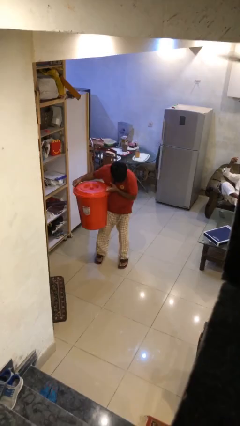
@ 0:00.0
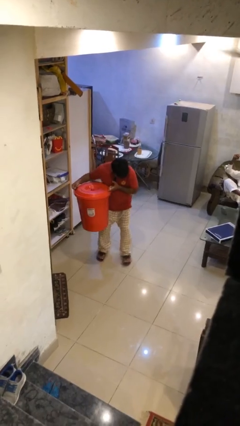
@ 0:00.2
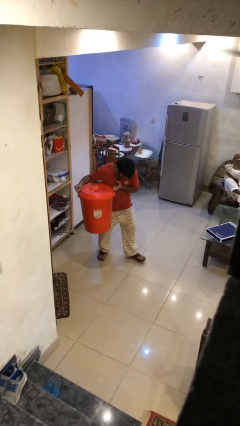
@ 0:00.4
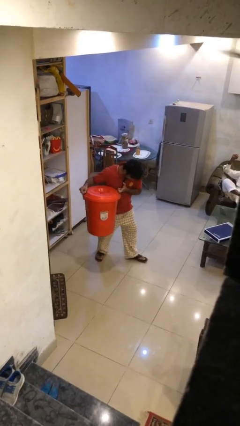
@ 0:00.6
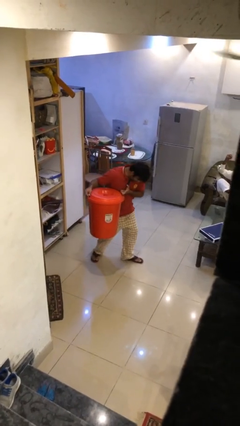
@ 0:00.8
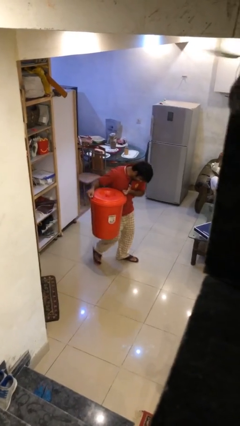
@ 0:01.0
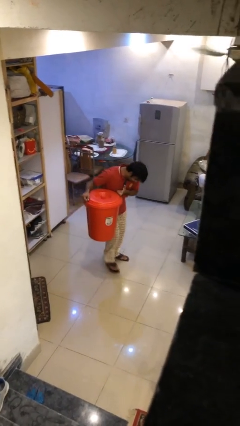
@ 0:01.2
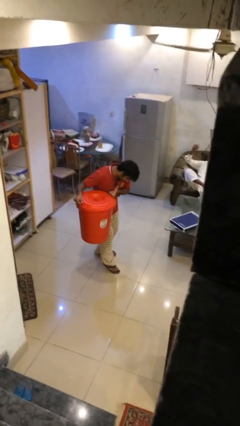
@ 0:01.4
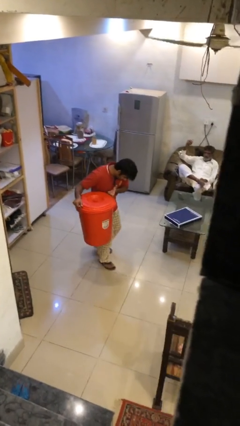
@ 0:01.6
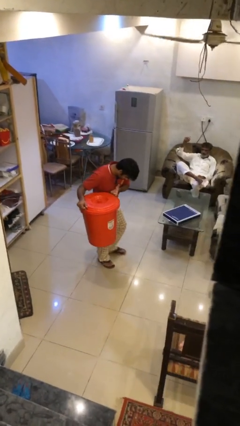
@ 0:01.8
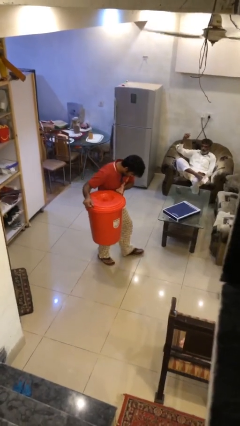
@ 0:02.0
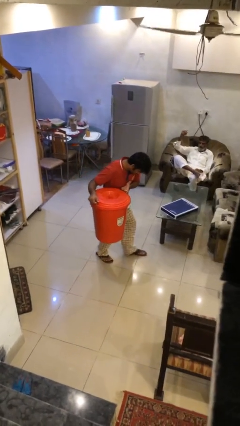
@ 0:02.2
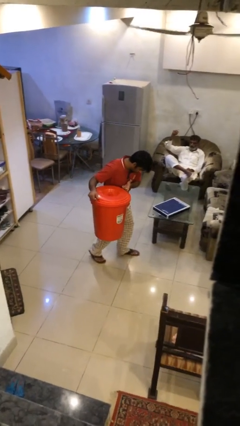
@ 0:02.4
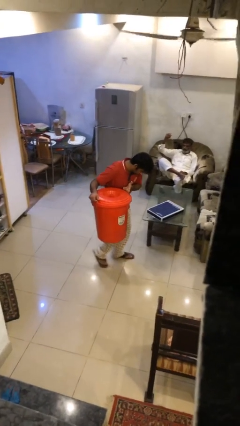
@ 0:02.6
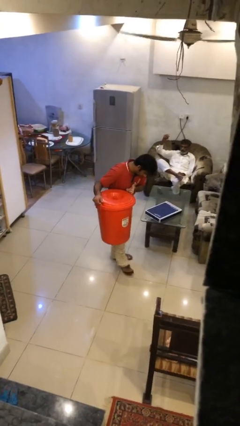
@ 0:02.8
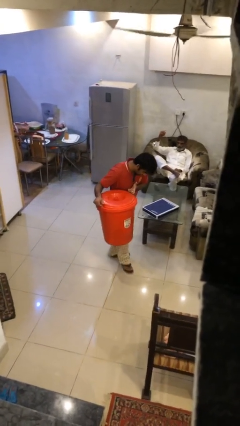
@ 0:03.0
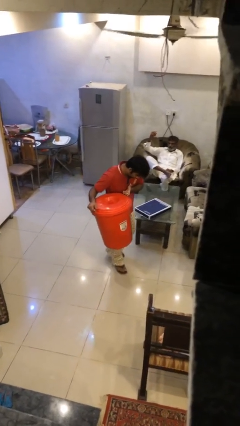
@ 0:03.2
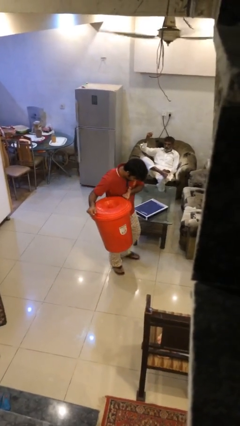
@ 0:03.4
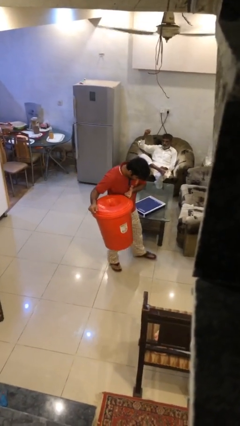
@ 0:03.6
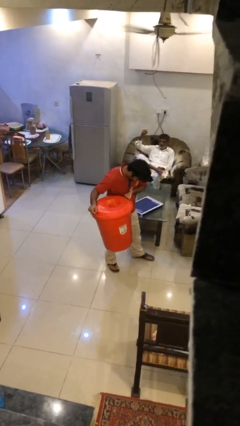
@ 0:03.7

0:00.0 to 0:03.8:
person carries heavy object

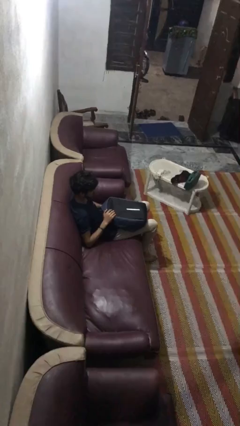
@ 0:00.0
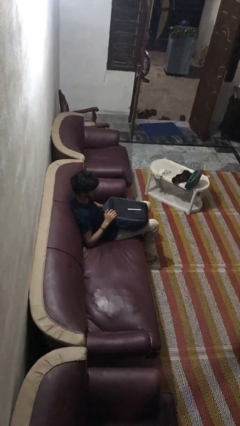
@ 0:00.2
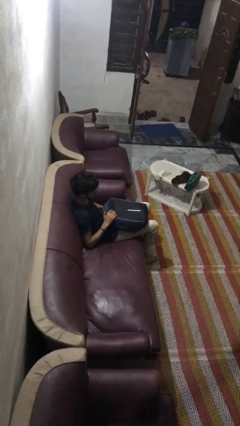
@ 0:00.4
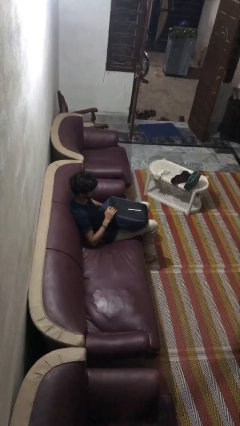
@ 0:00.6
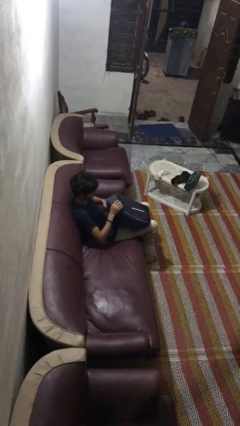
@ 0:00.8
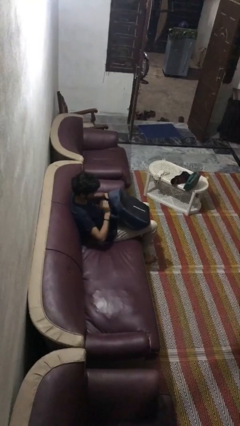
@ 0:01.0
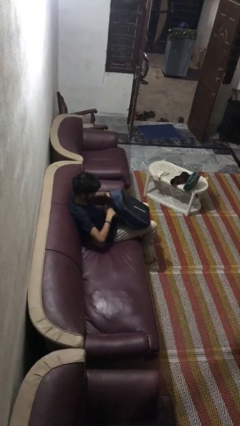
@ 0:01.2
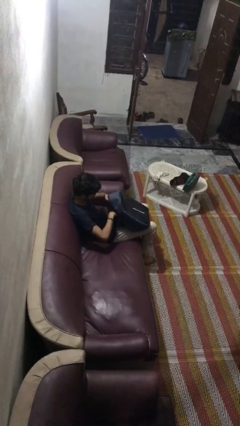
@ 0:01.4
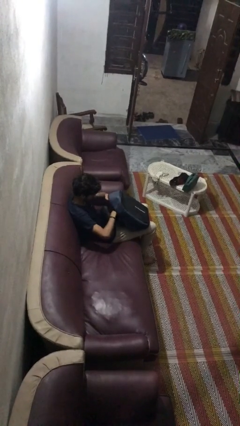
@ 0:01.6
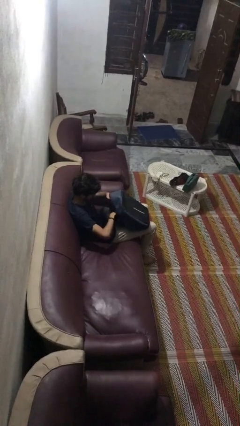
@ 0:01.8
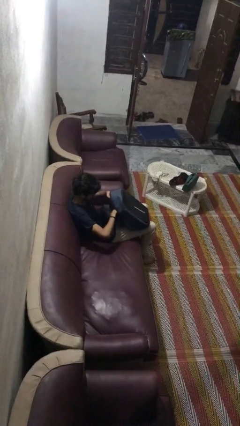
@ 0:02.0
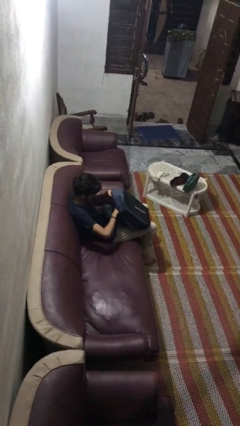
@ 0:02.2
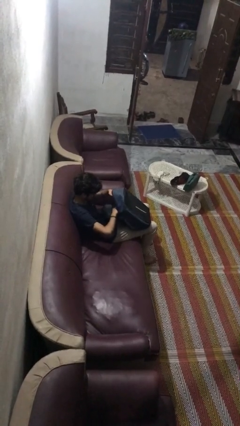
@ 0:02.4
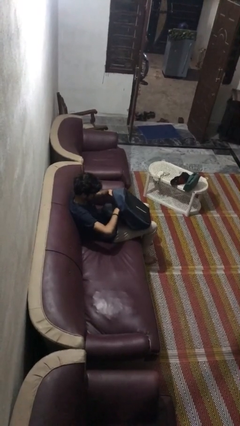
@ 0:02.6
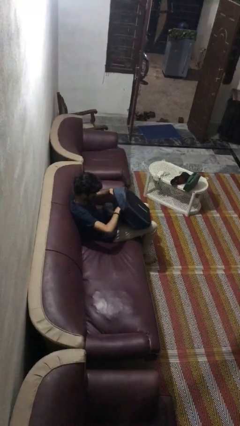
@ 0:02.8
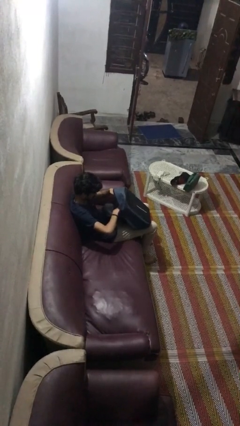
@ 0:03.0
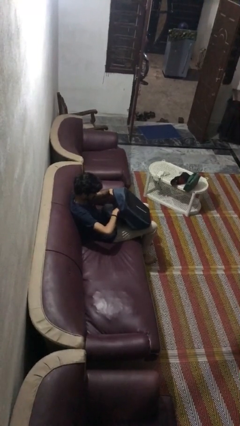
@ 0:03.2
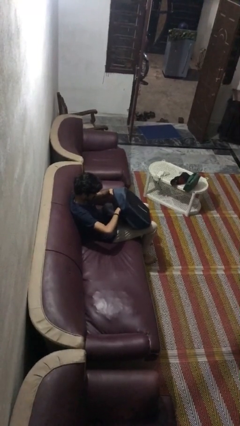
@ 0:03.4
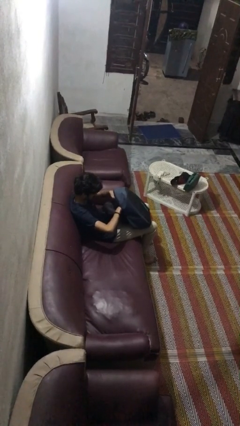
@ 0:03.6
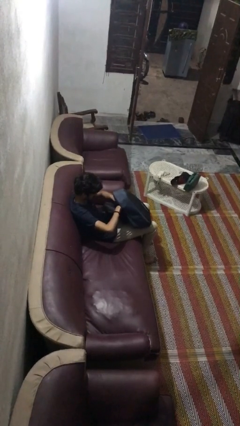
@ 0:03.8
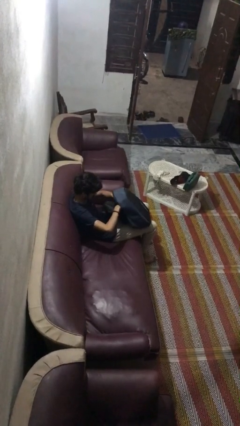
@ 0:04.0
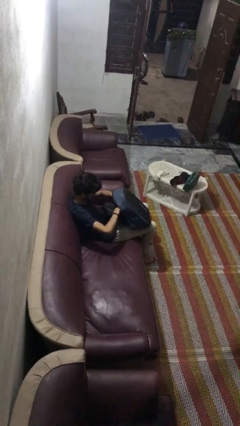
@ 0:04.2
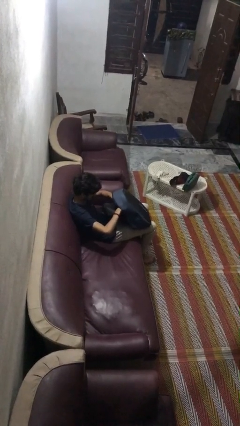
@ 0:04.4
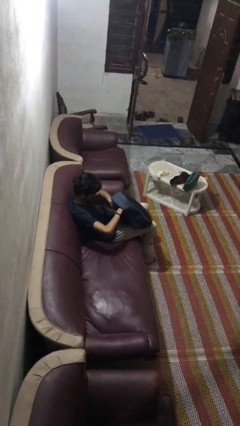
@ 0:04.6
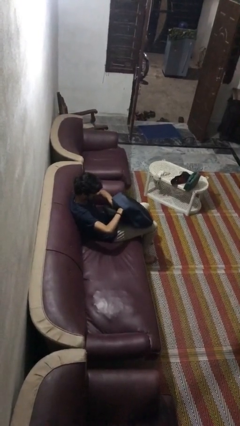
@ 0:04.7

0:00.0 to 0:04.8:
person searches in backpack

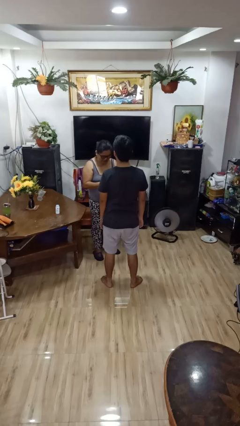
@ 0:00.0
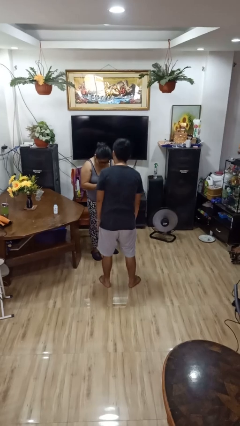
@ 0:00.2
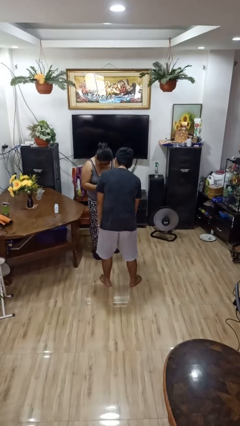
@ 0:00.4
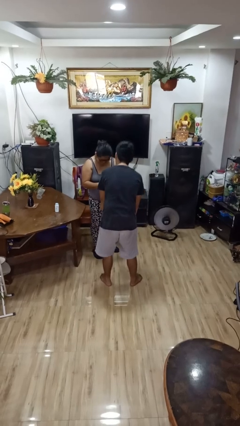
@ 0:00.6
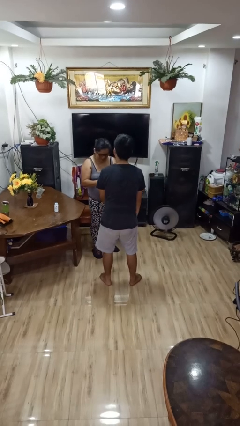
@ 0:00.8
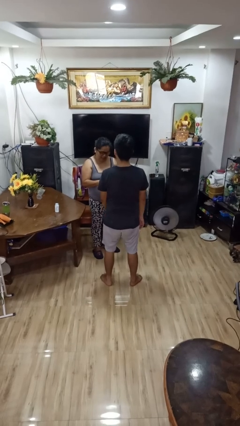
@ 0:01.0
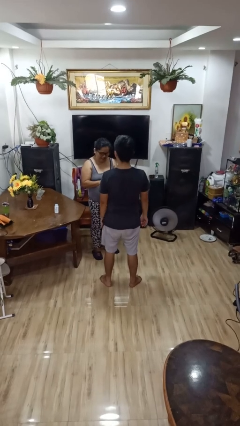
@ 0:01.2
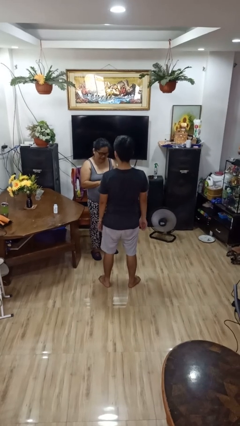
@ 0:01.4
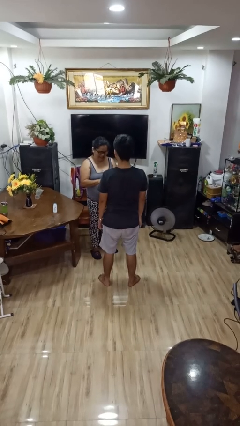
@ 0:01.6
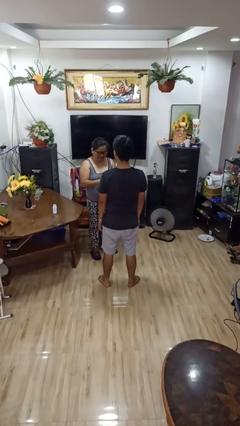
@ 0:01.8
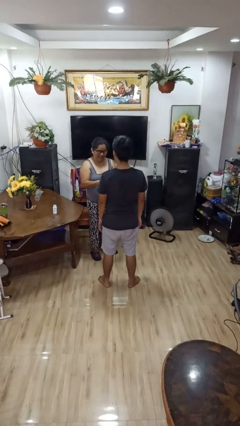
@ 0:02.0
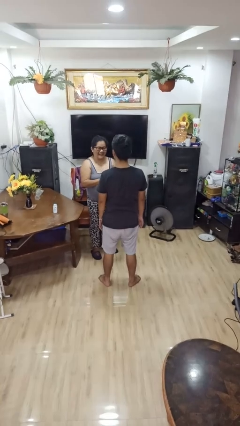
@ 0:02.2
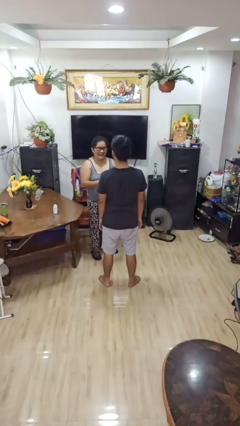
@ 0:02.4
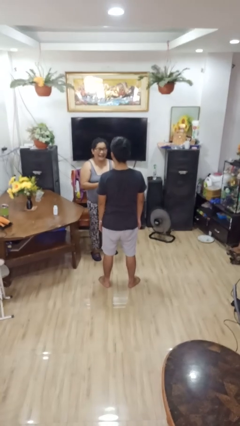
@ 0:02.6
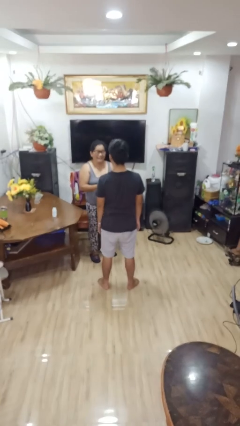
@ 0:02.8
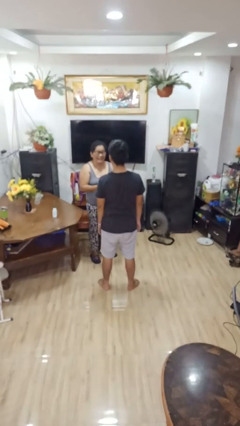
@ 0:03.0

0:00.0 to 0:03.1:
person laughs with person

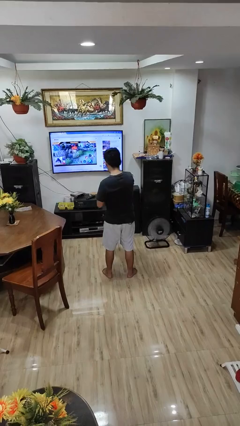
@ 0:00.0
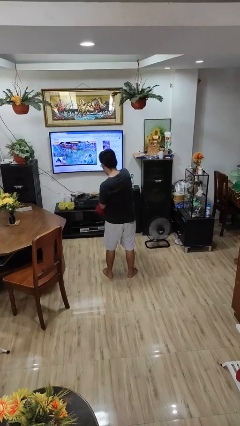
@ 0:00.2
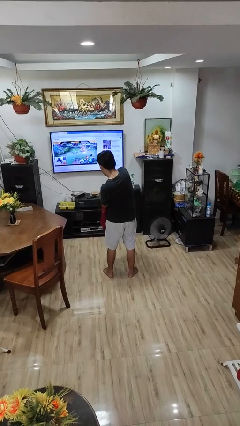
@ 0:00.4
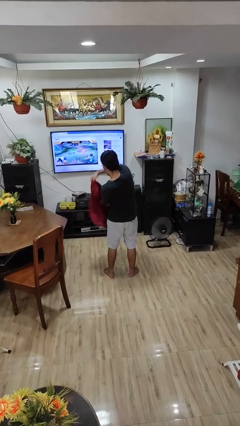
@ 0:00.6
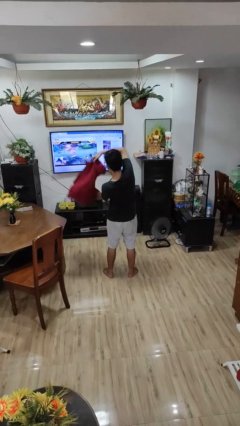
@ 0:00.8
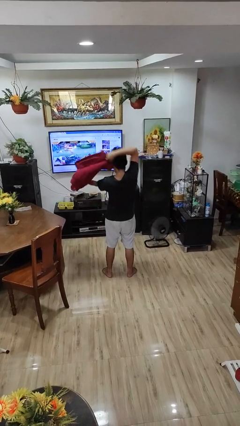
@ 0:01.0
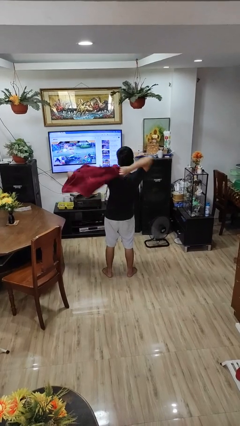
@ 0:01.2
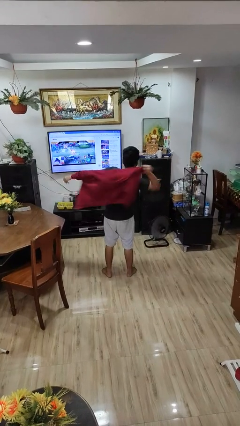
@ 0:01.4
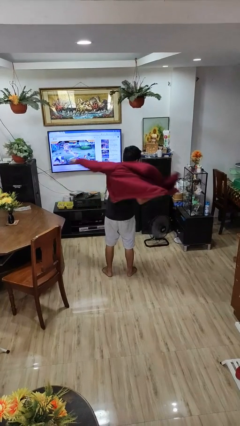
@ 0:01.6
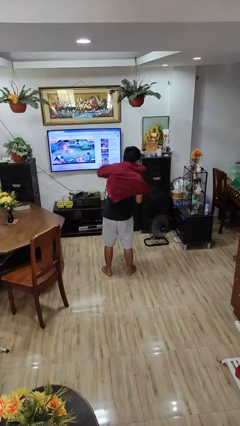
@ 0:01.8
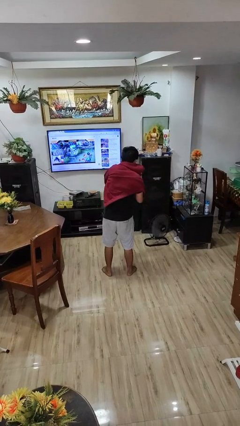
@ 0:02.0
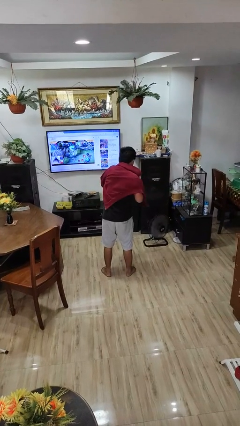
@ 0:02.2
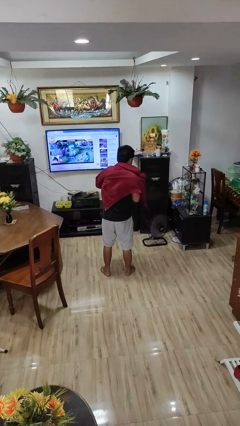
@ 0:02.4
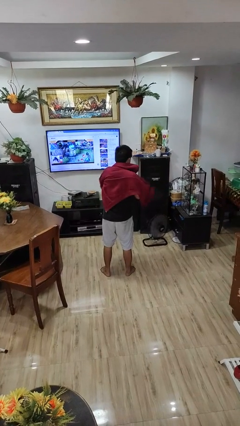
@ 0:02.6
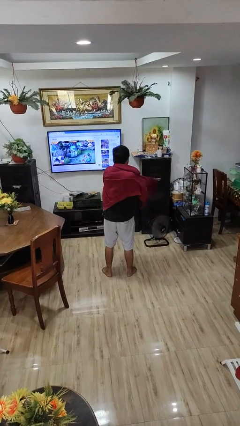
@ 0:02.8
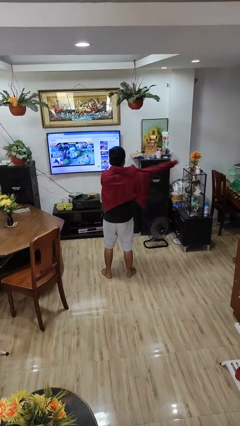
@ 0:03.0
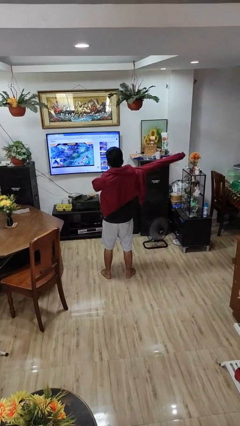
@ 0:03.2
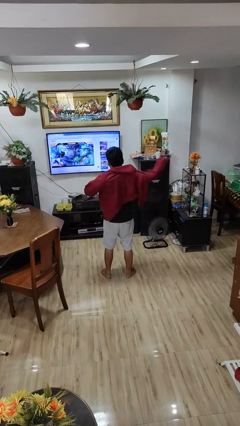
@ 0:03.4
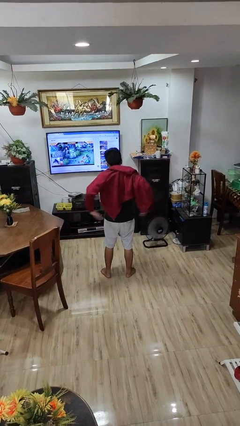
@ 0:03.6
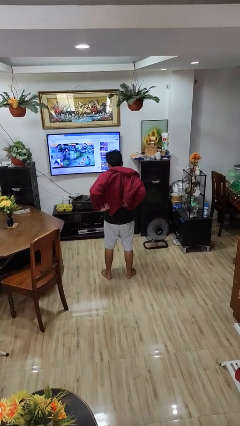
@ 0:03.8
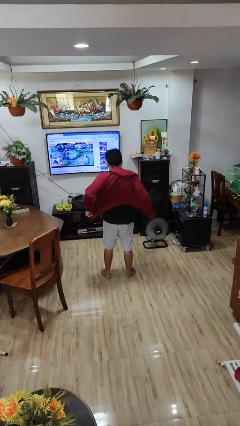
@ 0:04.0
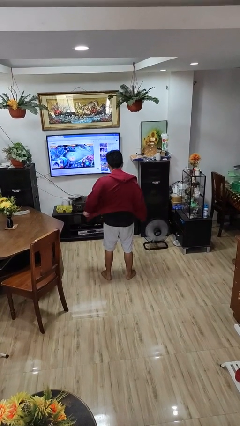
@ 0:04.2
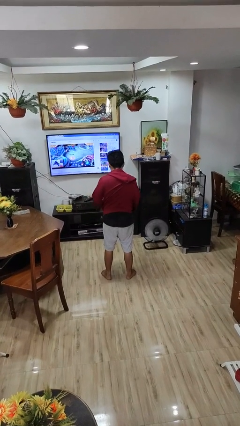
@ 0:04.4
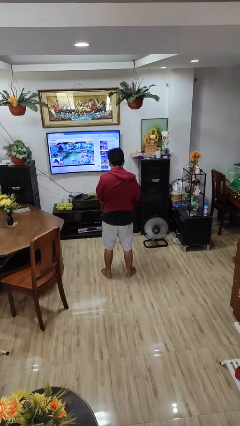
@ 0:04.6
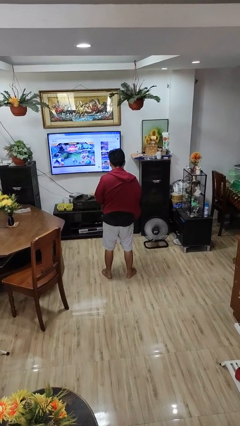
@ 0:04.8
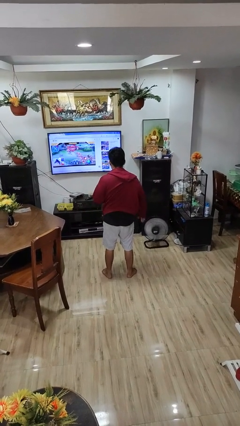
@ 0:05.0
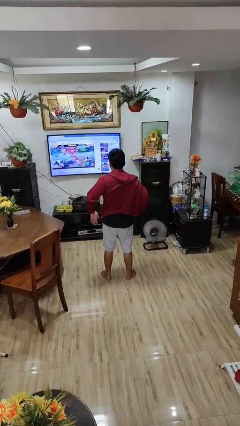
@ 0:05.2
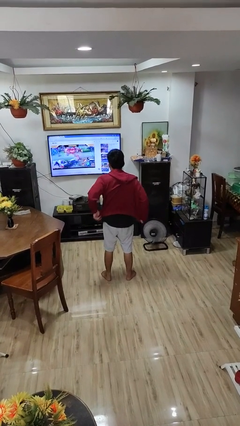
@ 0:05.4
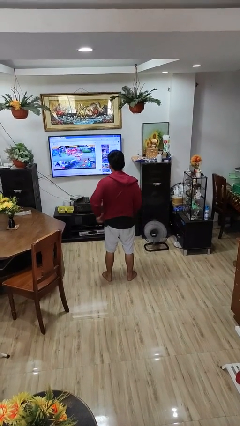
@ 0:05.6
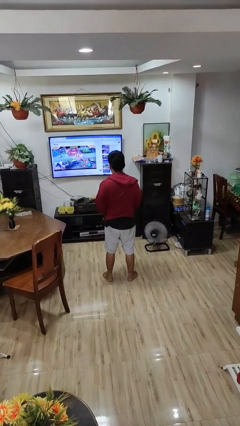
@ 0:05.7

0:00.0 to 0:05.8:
person puts on jacket

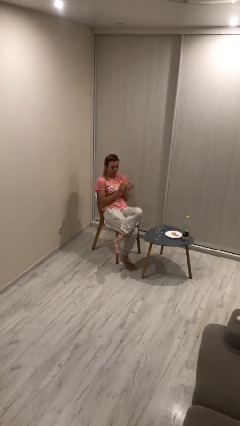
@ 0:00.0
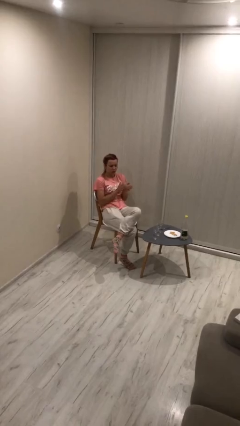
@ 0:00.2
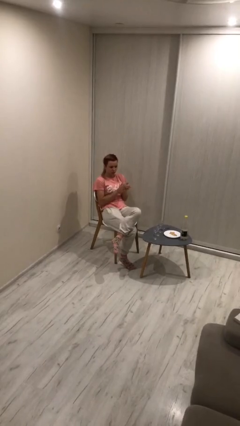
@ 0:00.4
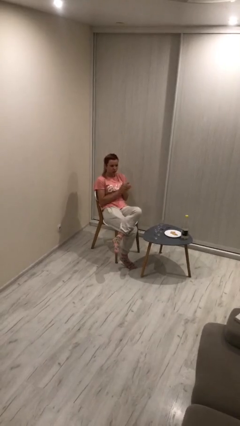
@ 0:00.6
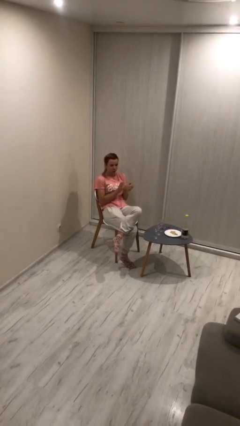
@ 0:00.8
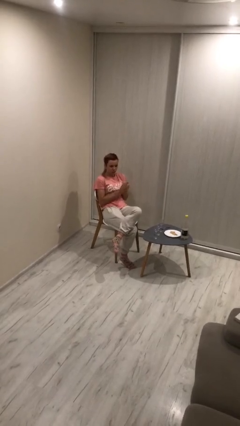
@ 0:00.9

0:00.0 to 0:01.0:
person claps hands
